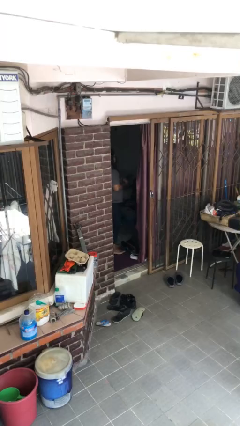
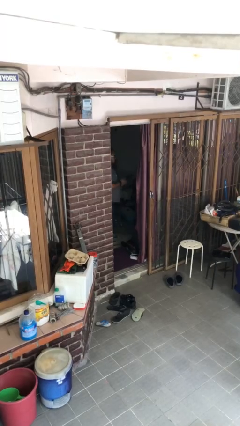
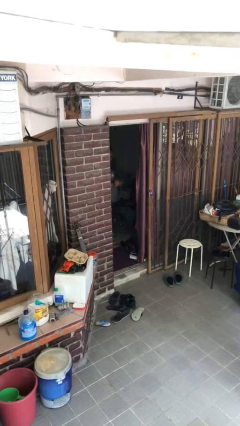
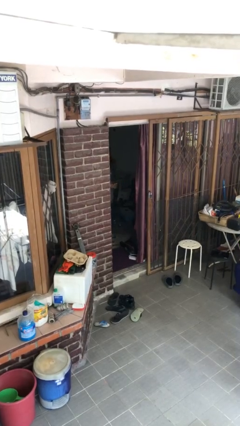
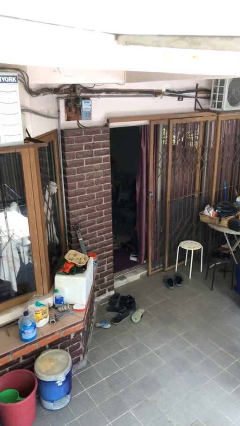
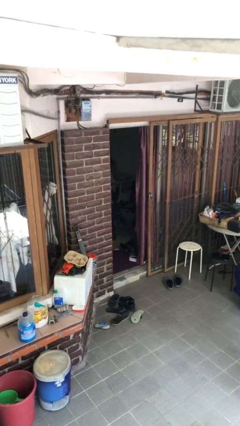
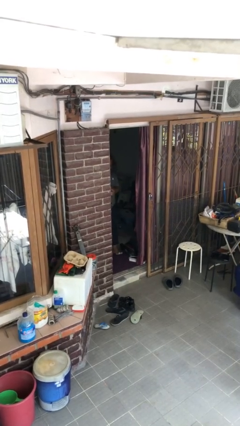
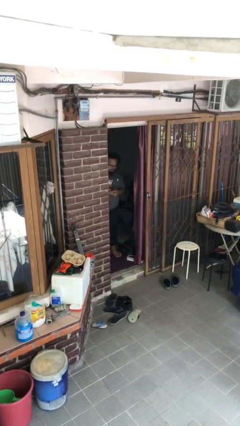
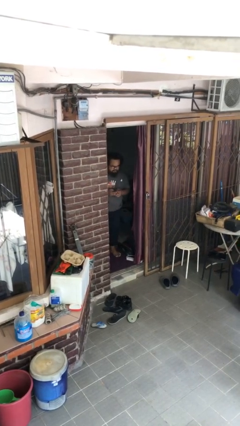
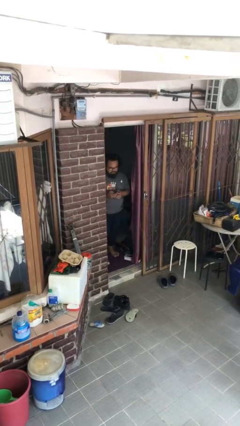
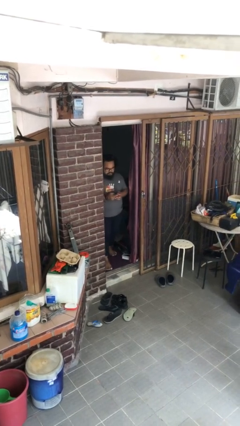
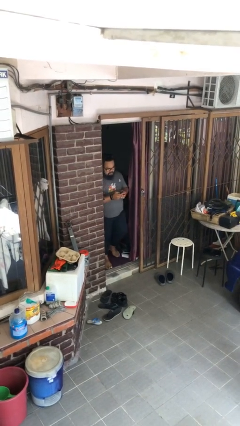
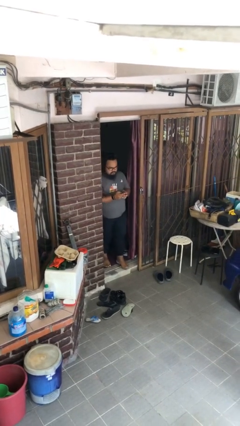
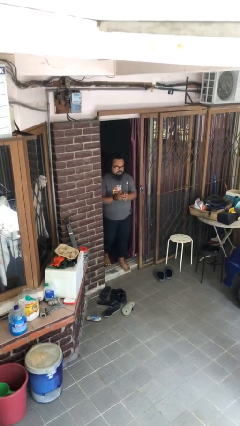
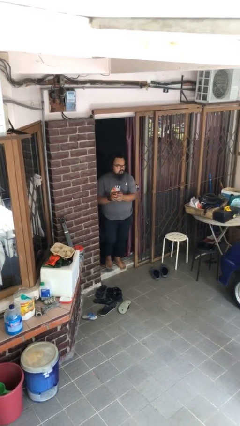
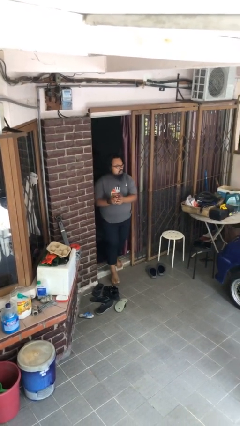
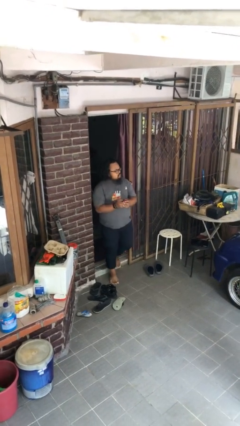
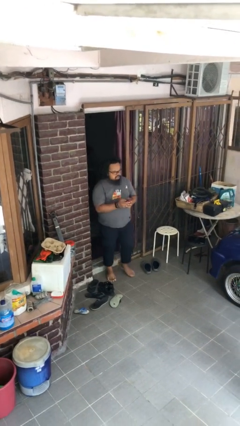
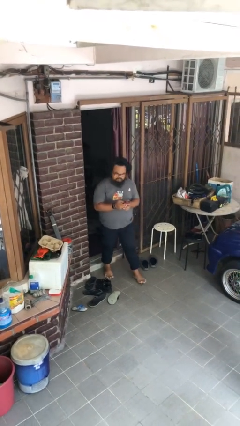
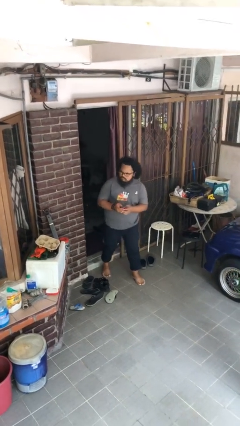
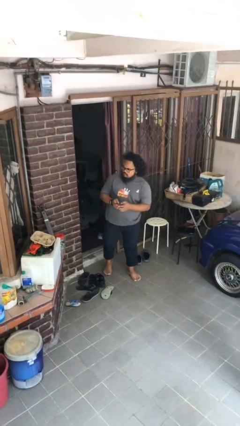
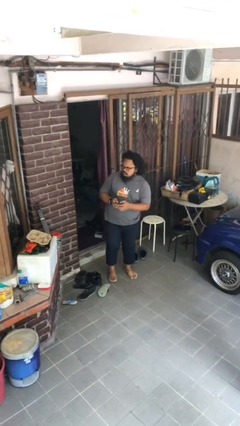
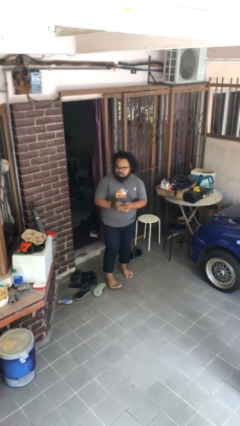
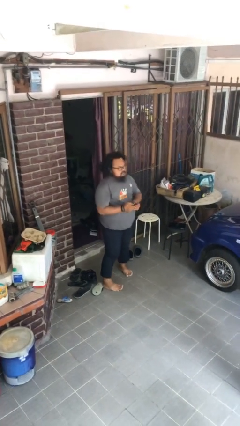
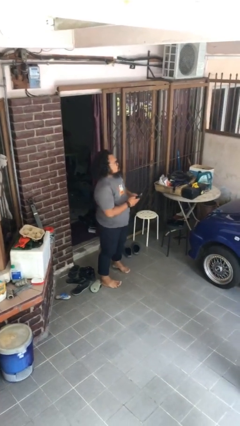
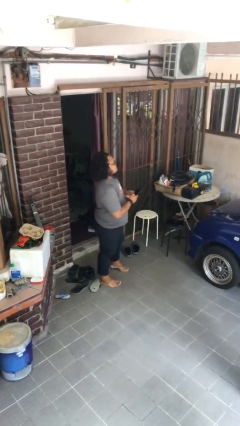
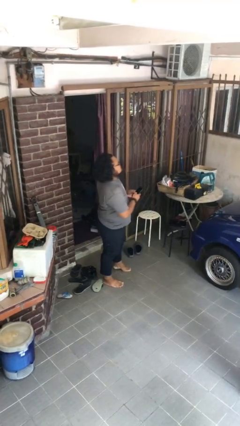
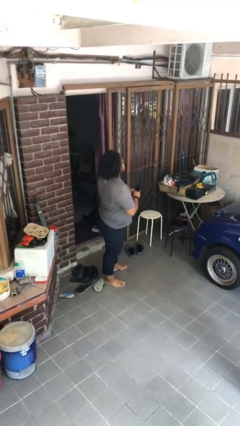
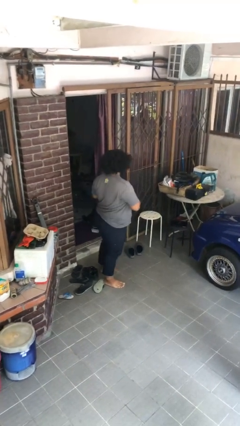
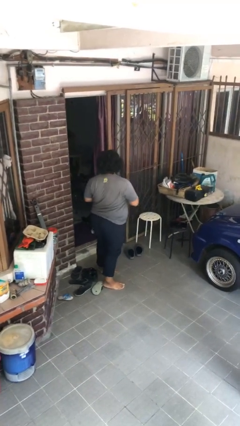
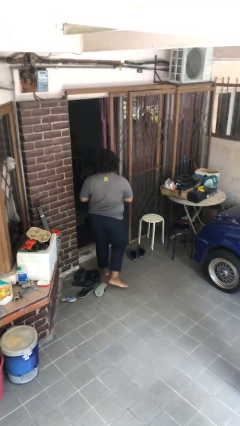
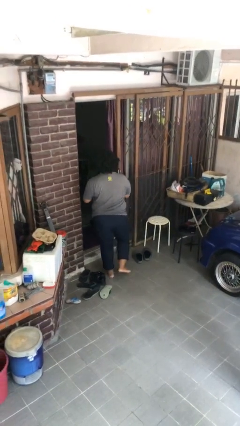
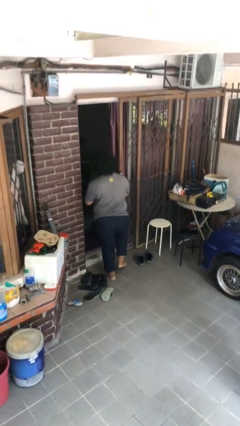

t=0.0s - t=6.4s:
person enters scene through structure

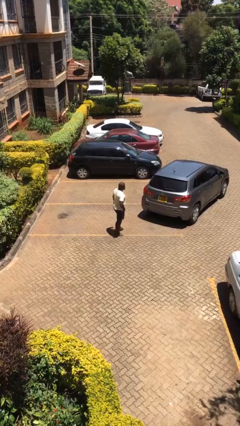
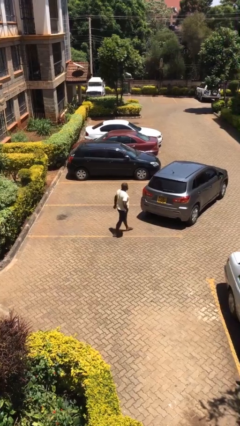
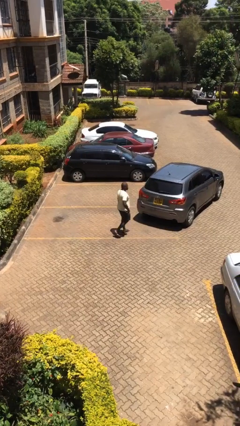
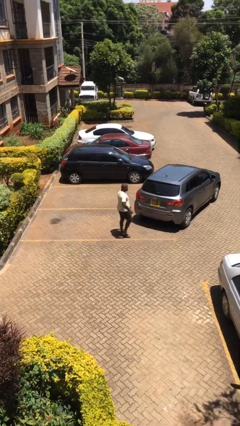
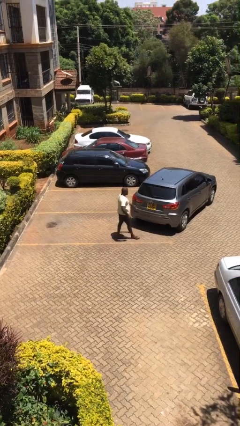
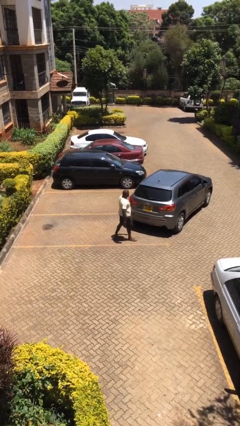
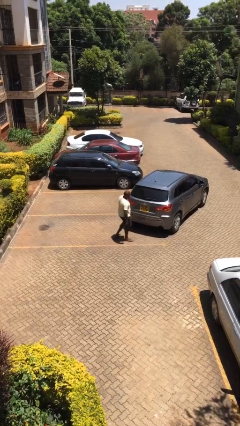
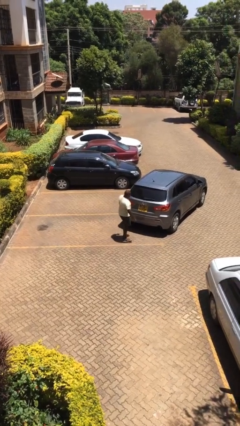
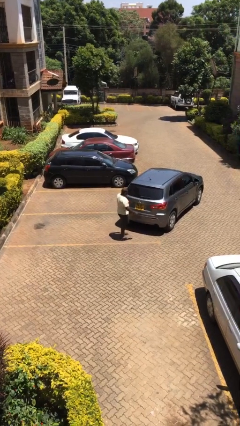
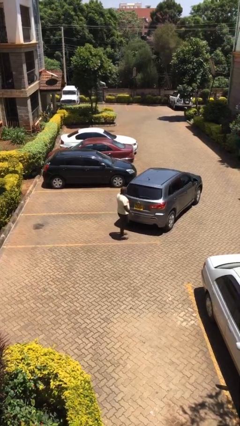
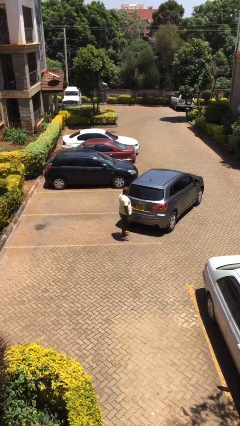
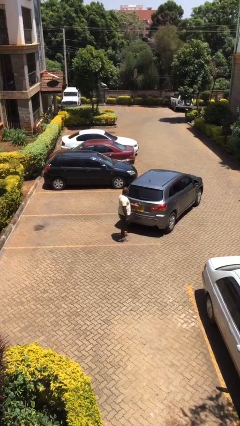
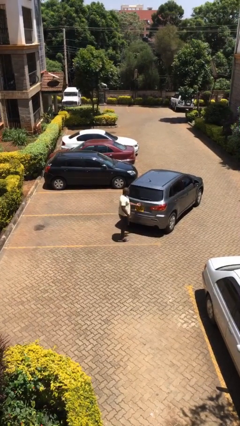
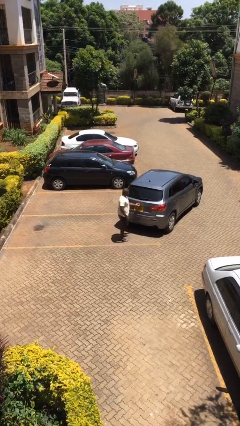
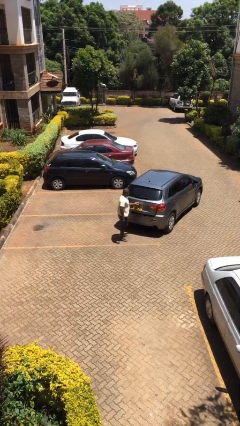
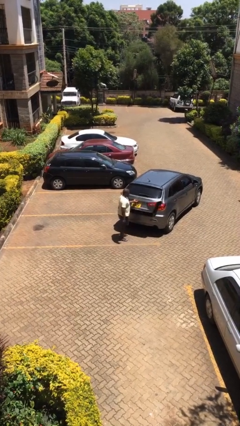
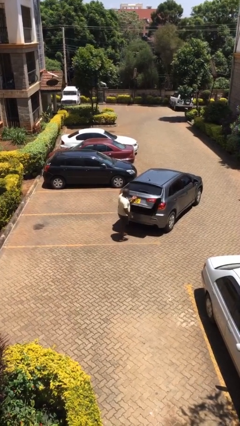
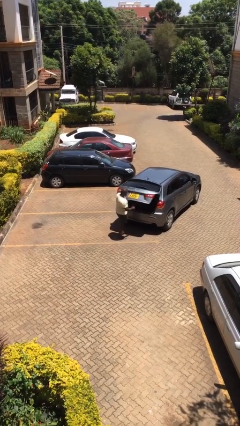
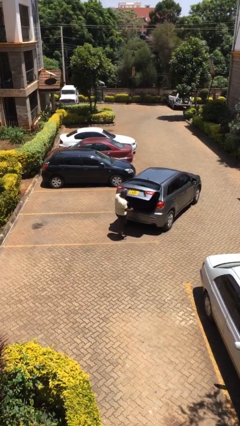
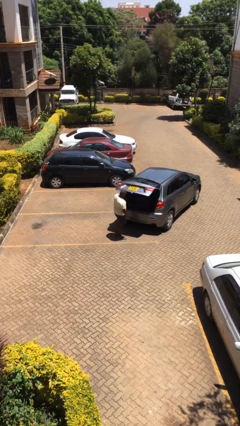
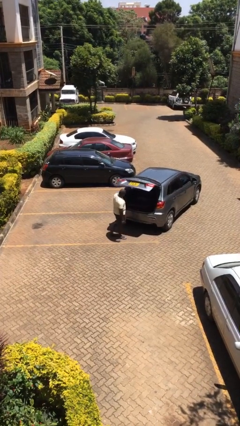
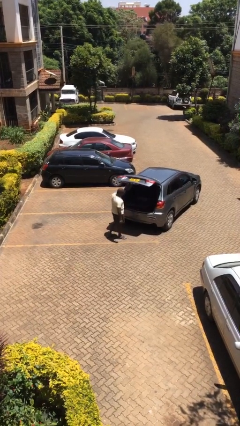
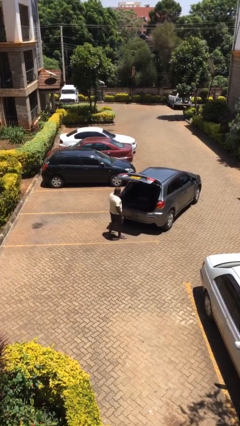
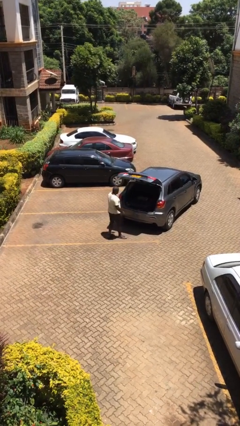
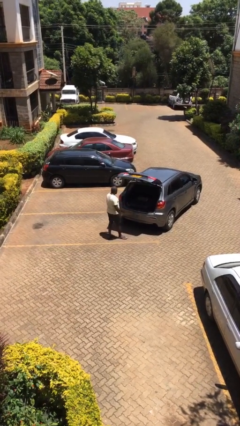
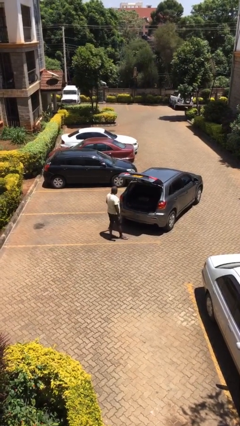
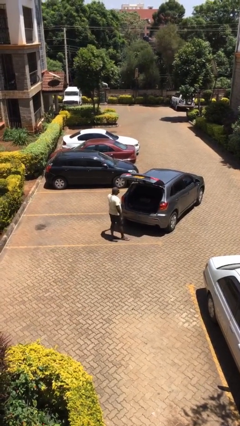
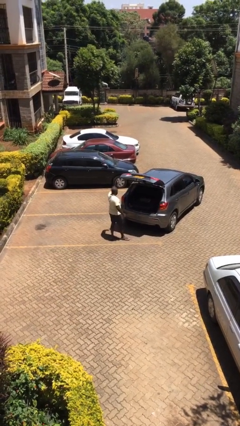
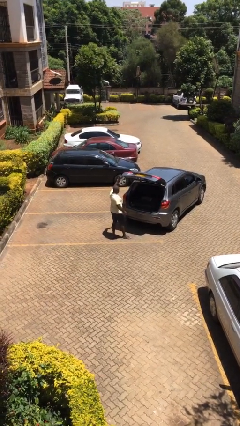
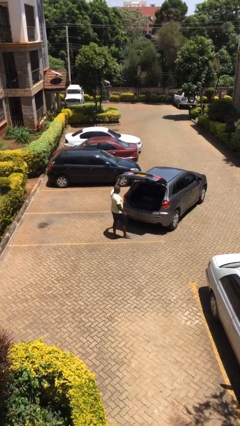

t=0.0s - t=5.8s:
person opens car trunk

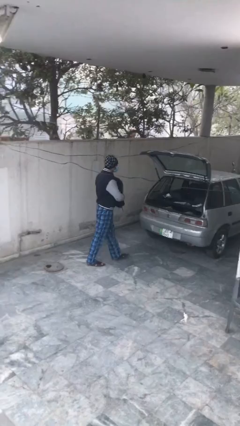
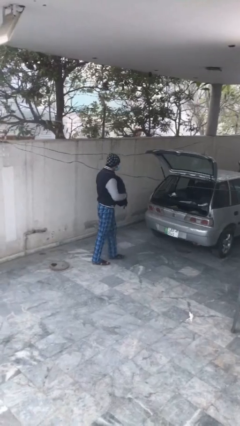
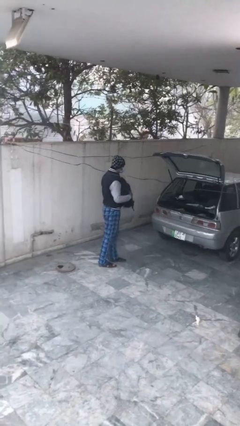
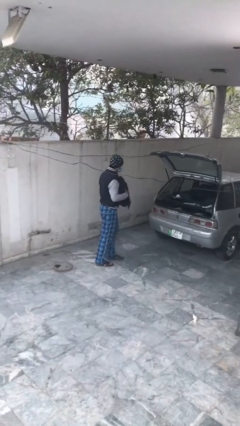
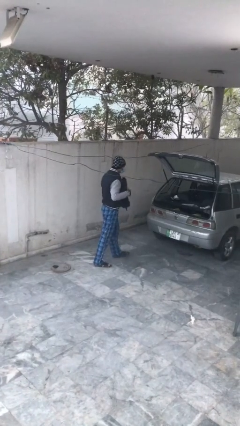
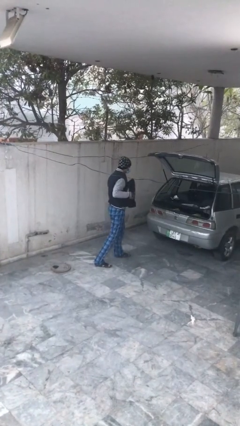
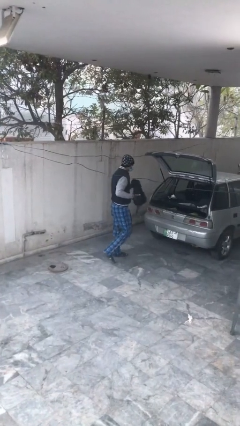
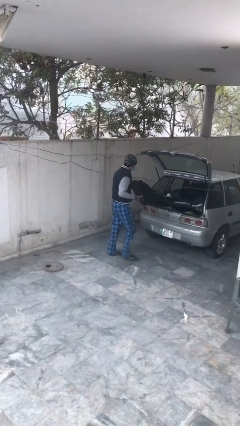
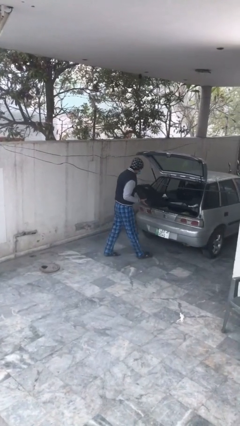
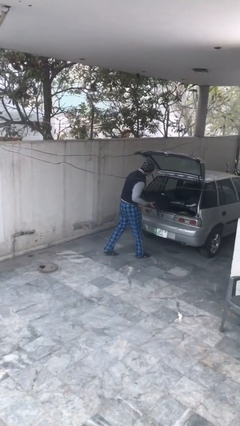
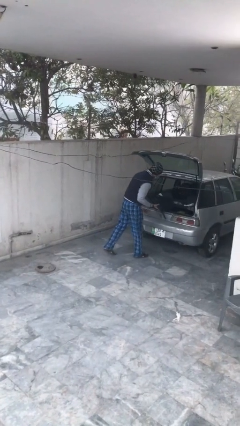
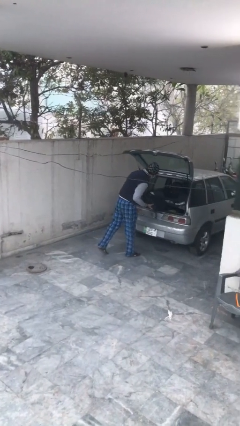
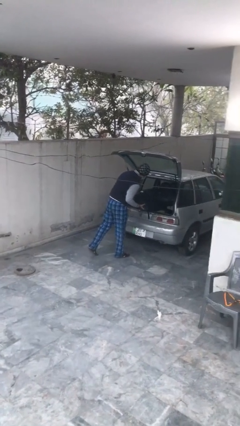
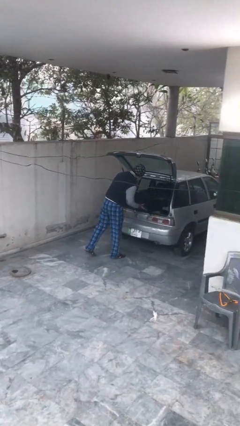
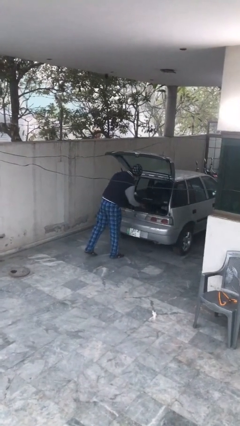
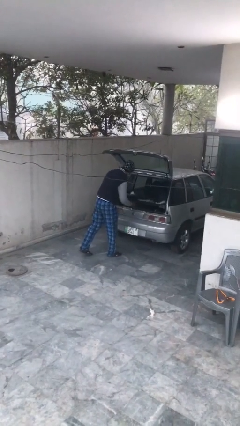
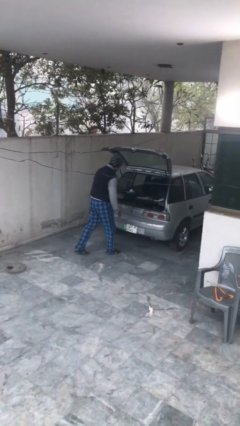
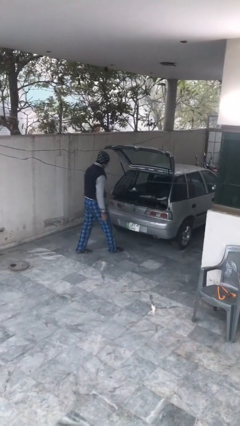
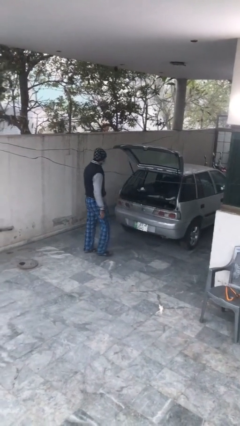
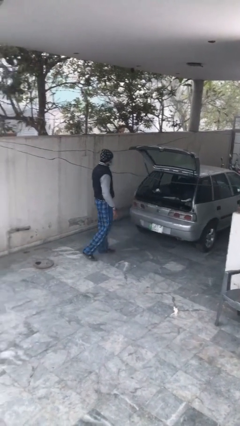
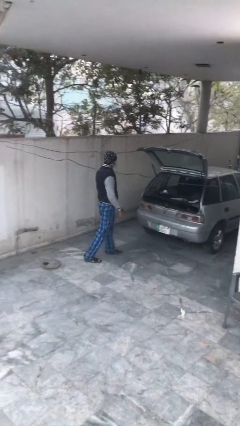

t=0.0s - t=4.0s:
person loads car

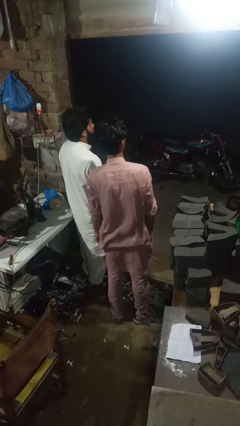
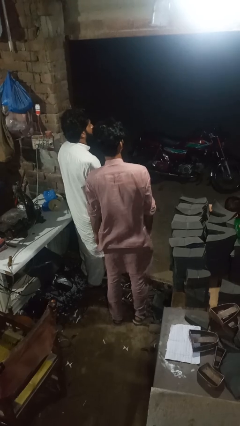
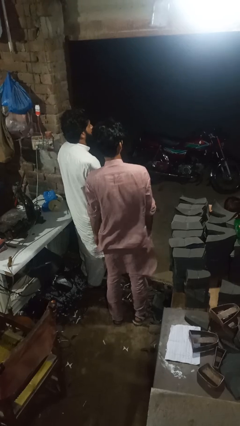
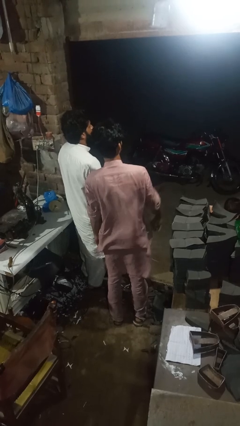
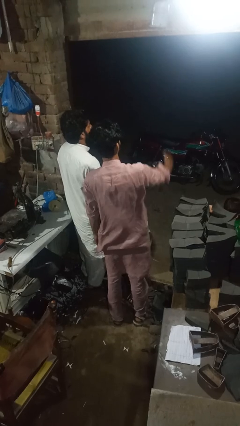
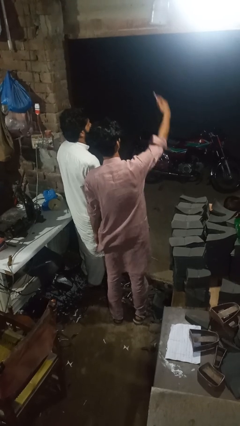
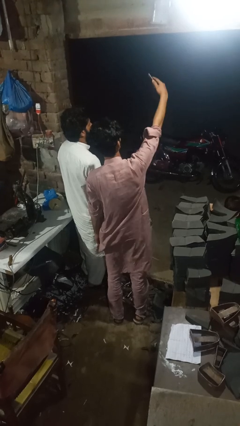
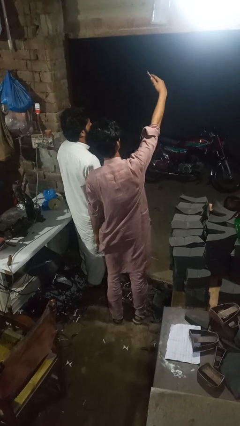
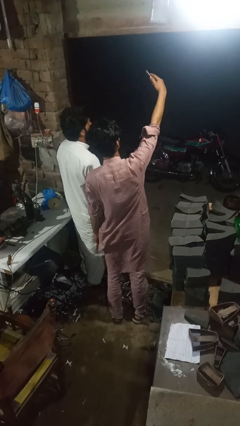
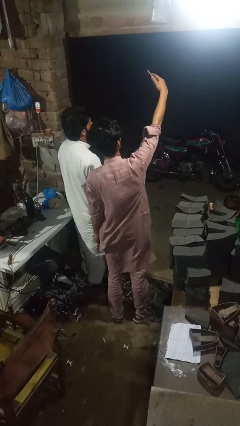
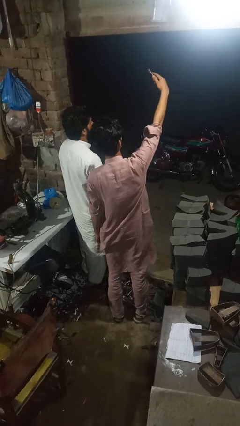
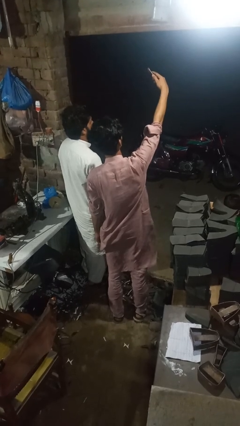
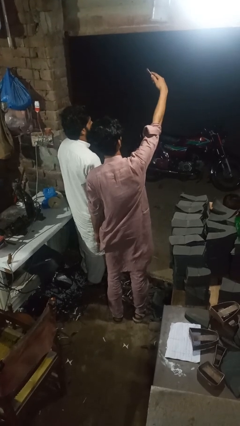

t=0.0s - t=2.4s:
person takes selfie with person
